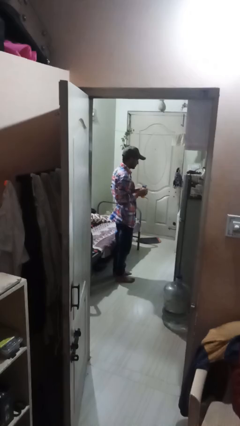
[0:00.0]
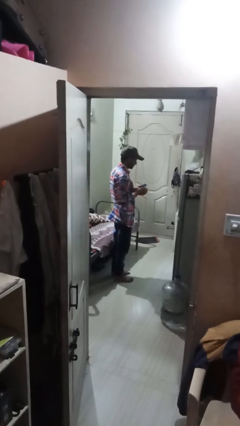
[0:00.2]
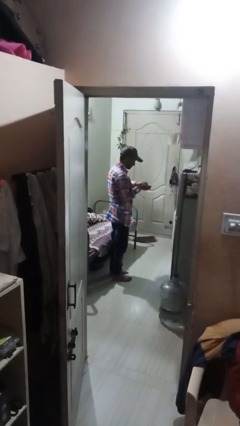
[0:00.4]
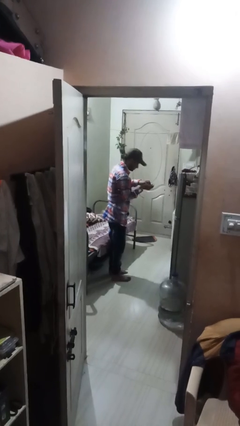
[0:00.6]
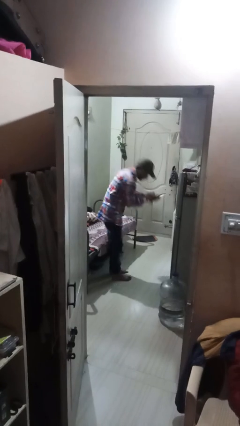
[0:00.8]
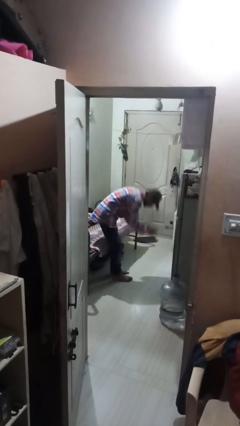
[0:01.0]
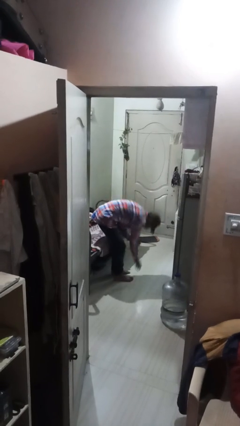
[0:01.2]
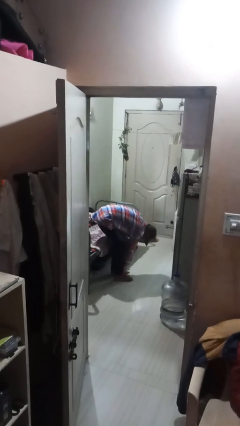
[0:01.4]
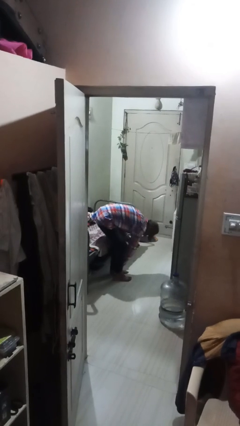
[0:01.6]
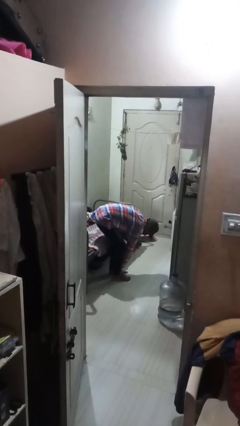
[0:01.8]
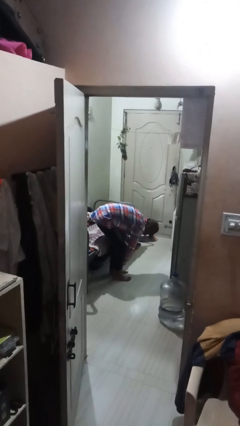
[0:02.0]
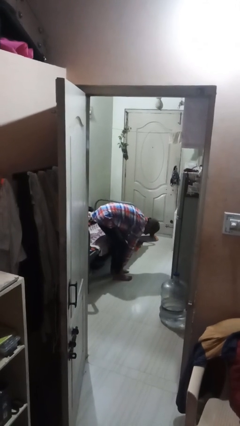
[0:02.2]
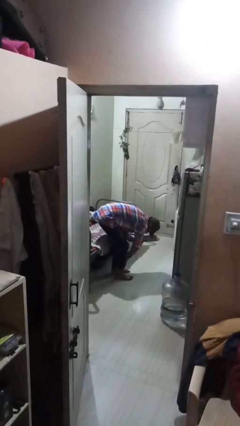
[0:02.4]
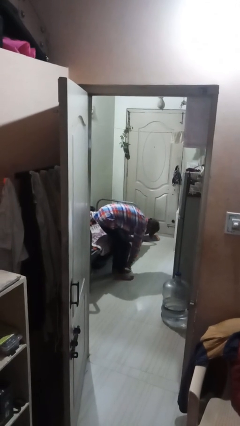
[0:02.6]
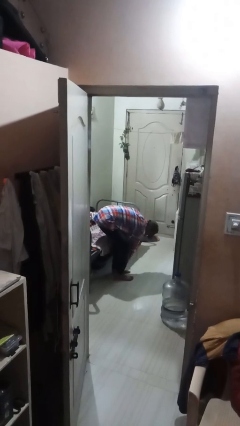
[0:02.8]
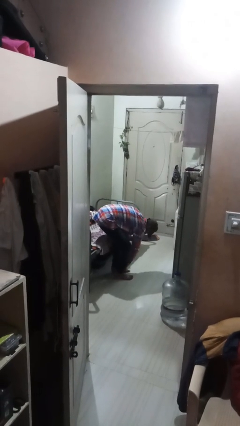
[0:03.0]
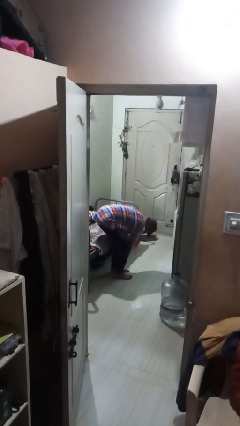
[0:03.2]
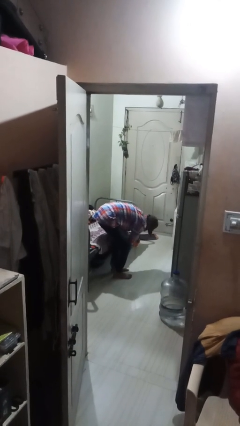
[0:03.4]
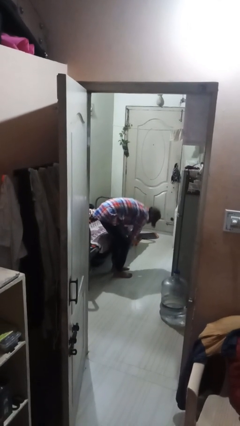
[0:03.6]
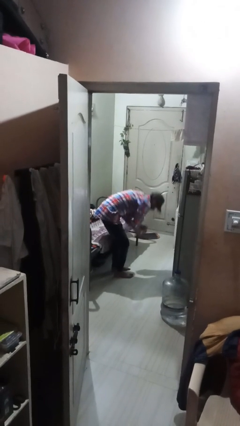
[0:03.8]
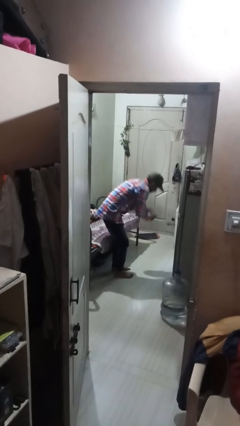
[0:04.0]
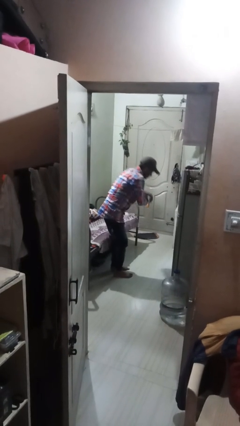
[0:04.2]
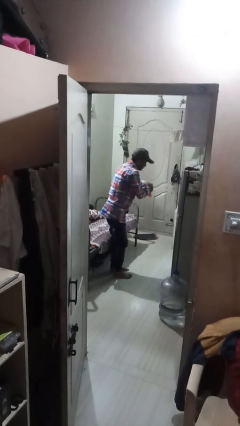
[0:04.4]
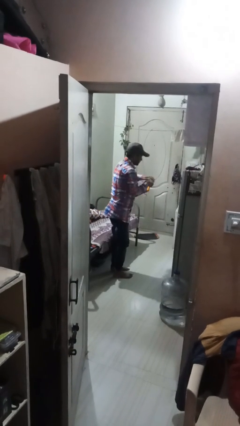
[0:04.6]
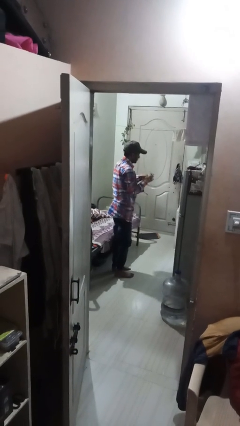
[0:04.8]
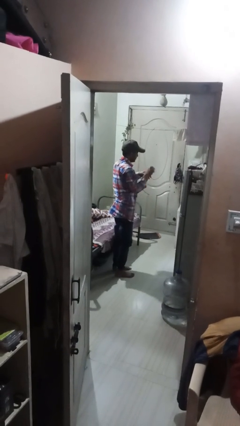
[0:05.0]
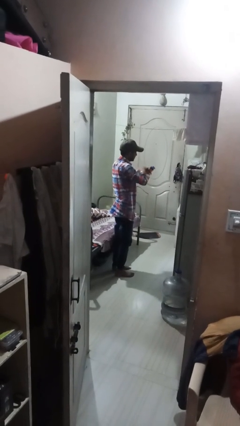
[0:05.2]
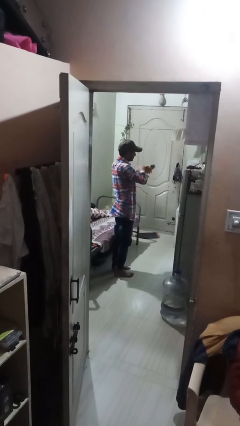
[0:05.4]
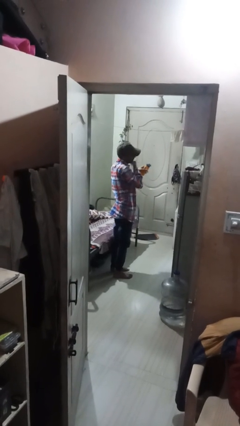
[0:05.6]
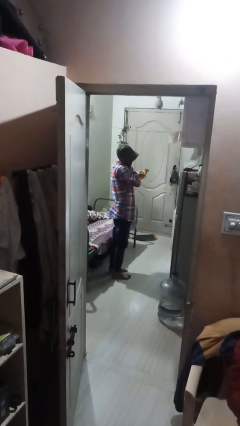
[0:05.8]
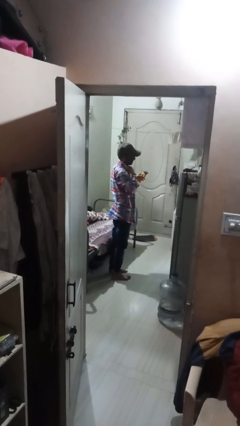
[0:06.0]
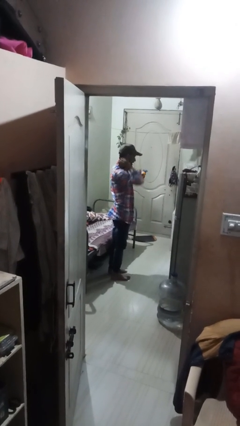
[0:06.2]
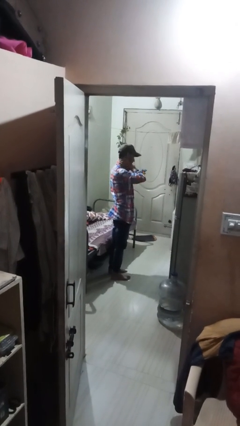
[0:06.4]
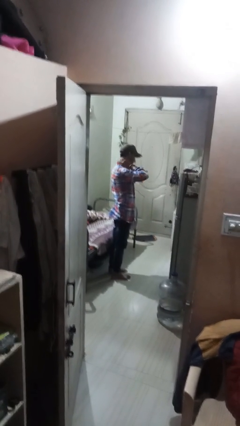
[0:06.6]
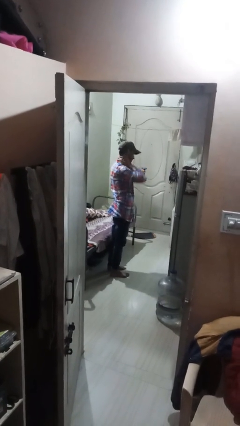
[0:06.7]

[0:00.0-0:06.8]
person applies sunscreen

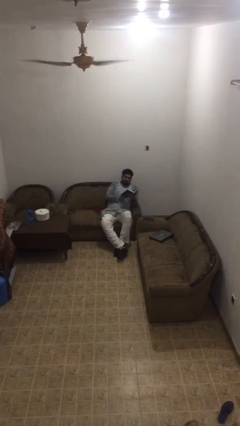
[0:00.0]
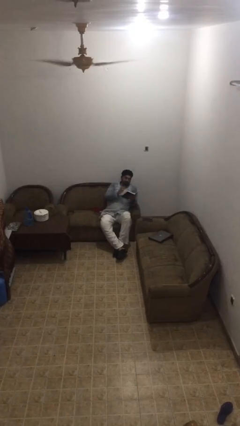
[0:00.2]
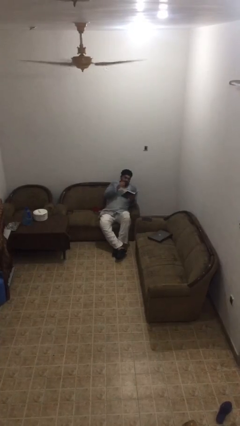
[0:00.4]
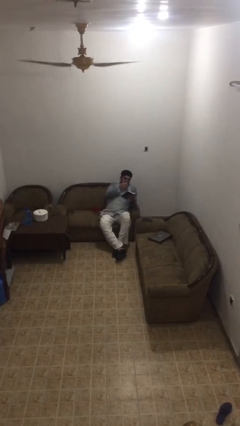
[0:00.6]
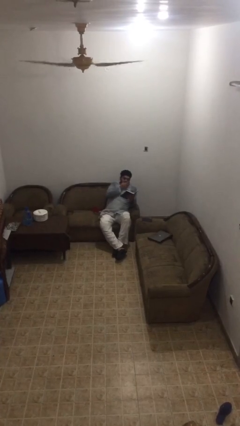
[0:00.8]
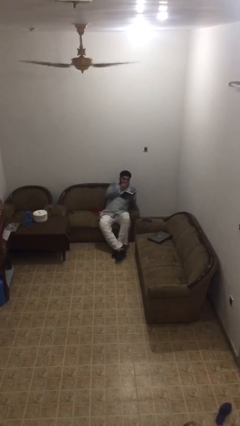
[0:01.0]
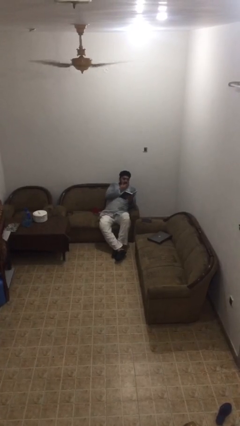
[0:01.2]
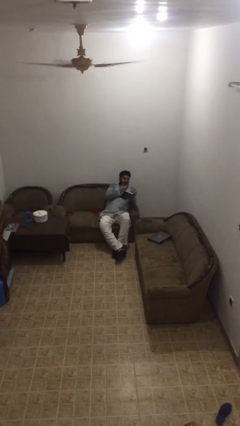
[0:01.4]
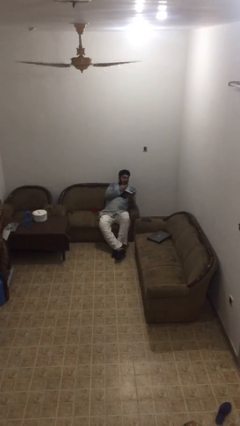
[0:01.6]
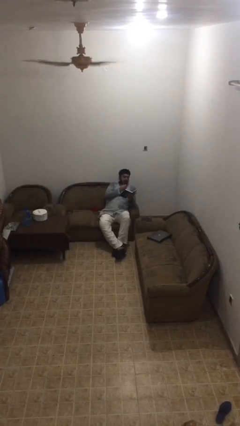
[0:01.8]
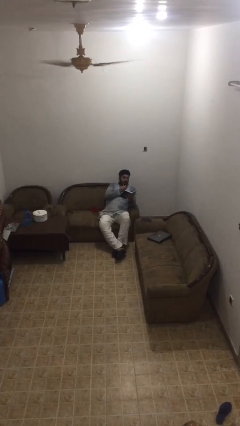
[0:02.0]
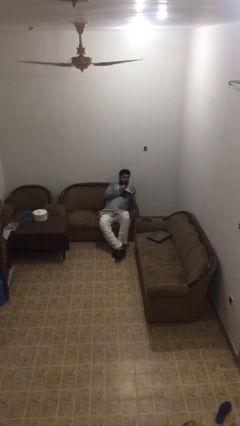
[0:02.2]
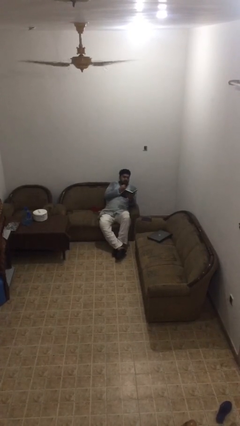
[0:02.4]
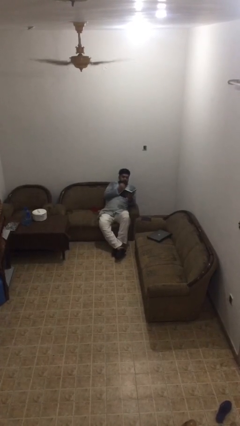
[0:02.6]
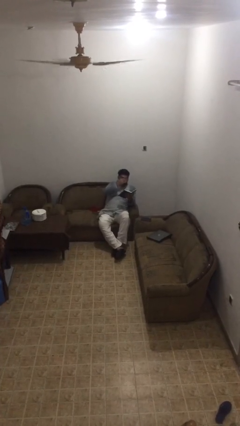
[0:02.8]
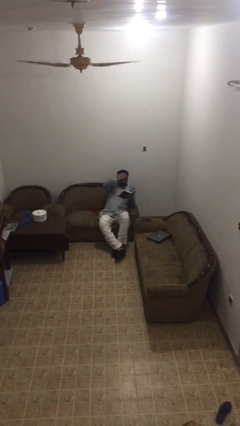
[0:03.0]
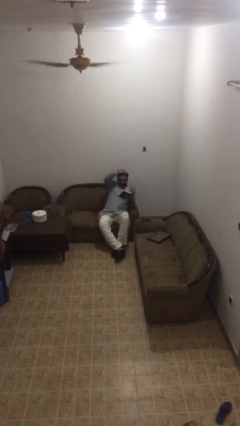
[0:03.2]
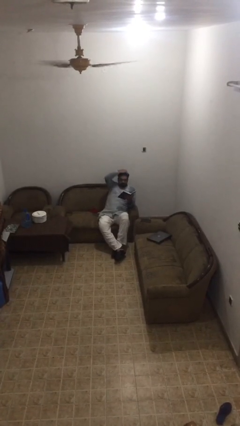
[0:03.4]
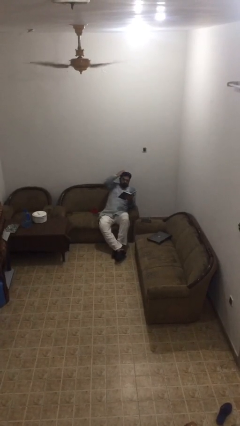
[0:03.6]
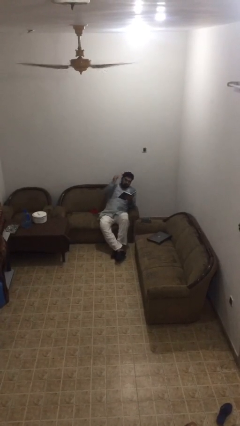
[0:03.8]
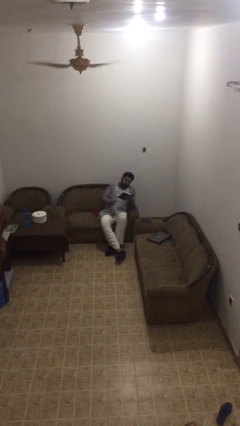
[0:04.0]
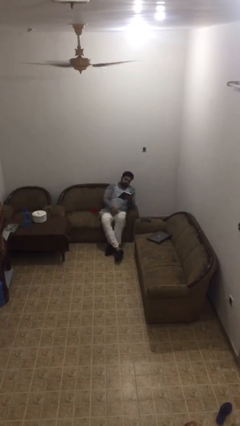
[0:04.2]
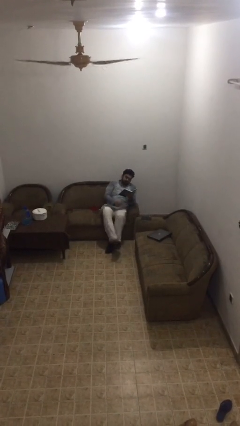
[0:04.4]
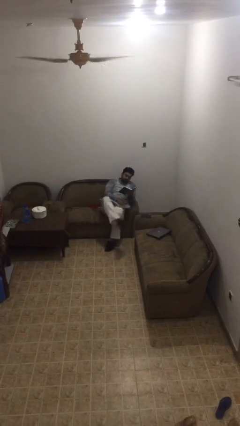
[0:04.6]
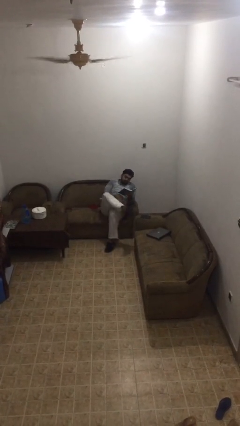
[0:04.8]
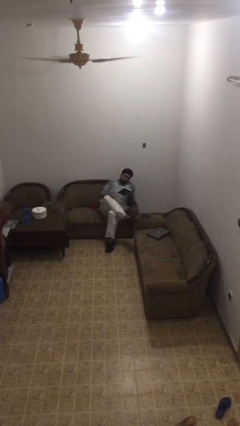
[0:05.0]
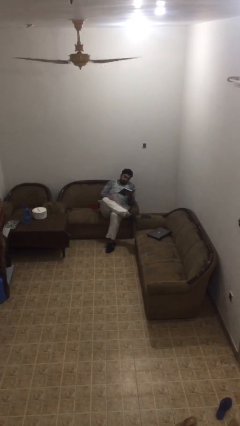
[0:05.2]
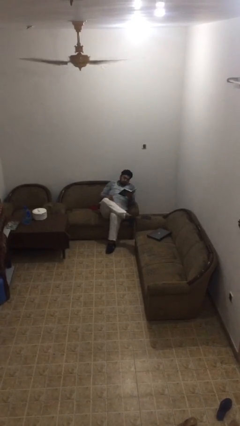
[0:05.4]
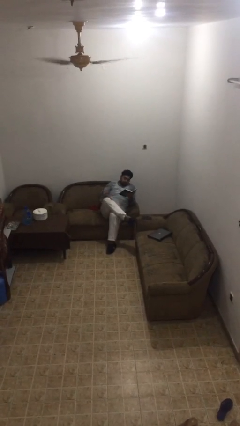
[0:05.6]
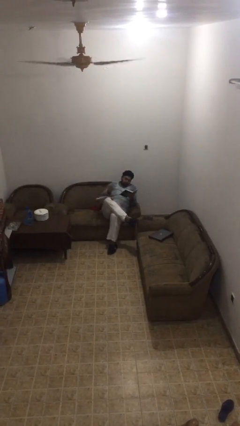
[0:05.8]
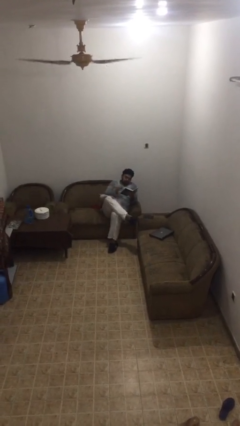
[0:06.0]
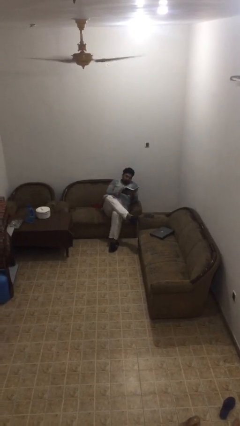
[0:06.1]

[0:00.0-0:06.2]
person reads document

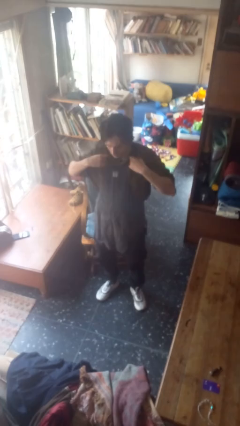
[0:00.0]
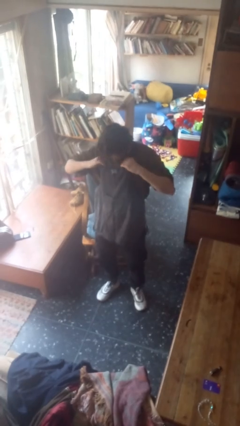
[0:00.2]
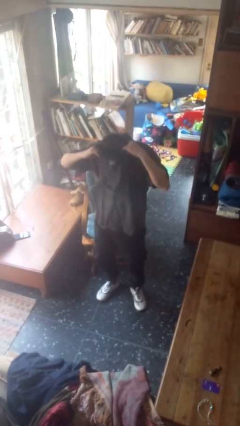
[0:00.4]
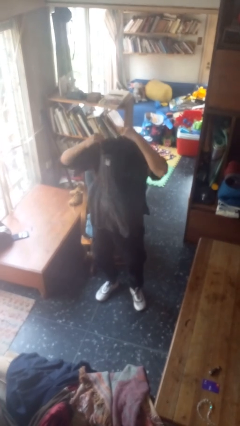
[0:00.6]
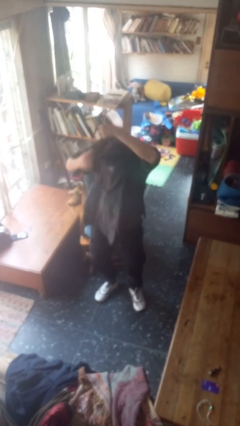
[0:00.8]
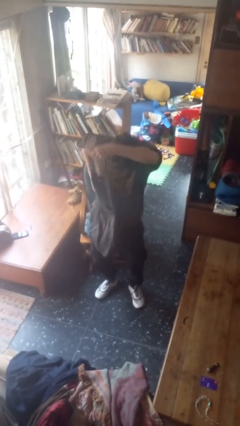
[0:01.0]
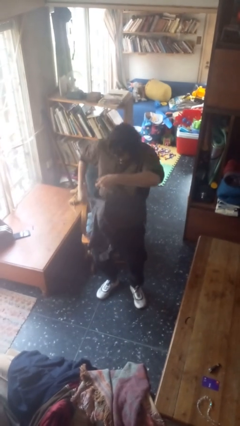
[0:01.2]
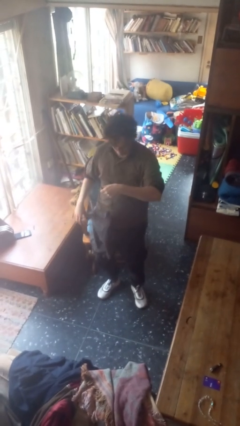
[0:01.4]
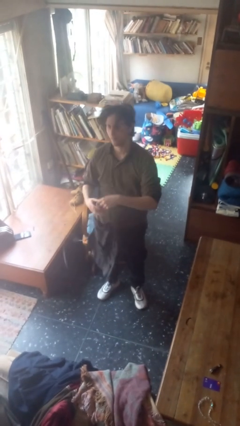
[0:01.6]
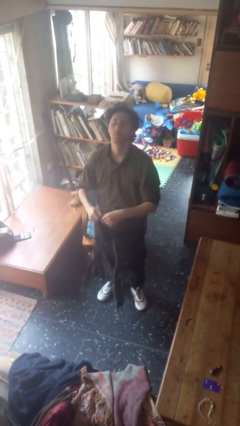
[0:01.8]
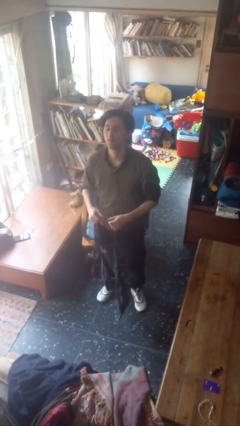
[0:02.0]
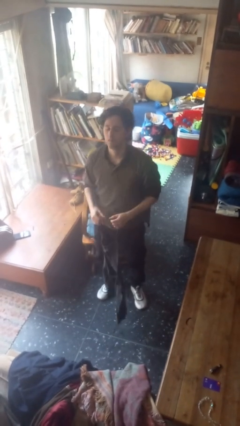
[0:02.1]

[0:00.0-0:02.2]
person takes off apron

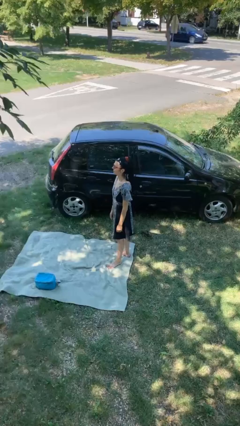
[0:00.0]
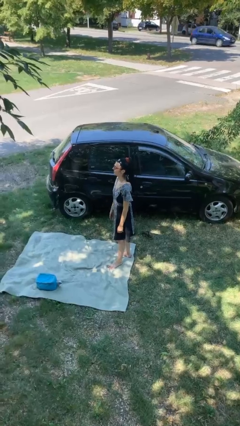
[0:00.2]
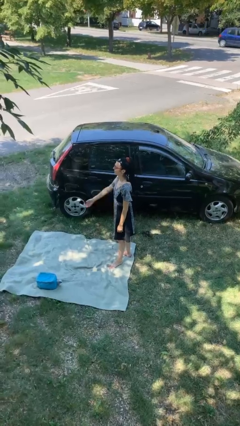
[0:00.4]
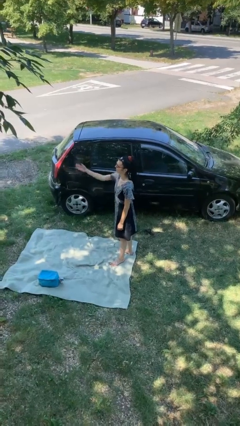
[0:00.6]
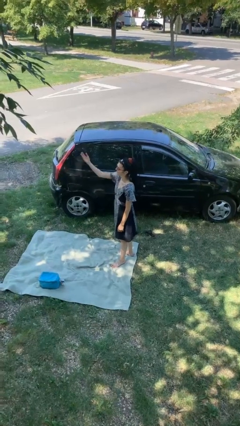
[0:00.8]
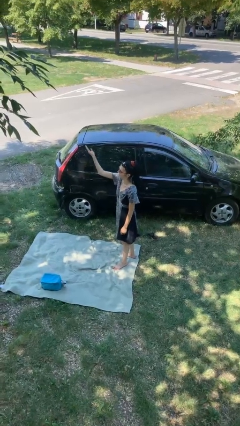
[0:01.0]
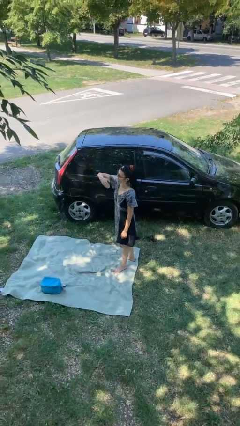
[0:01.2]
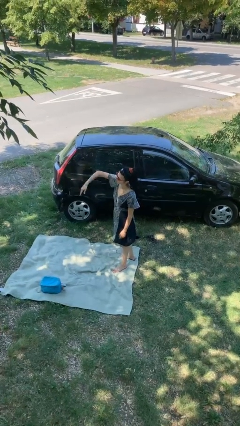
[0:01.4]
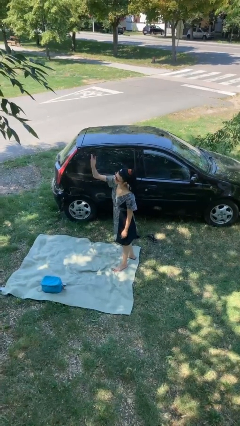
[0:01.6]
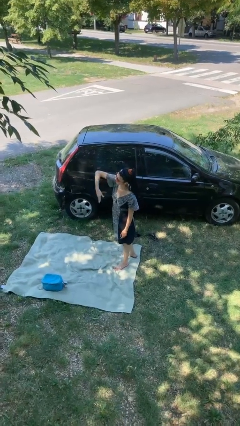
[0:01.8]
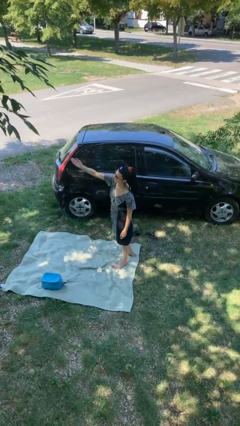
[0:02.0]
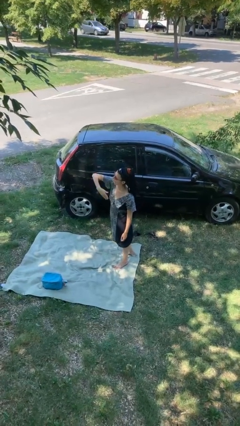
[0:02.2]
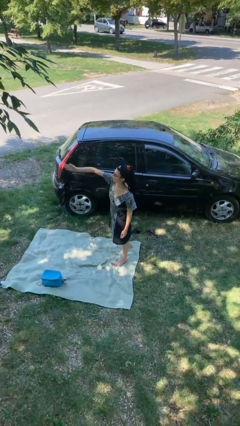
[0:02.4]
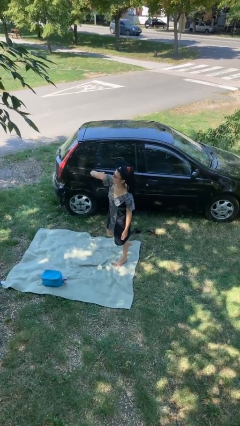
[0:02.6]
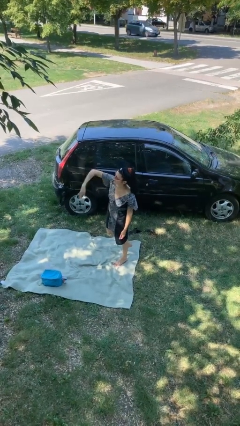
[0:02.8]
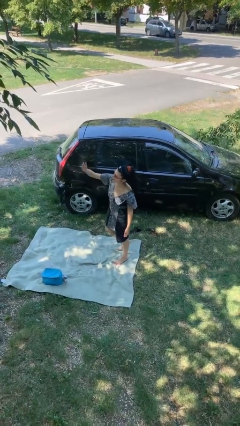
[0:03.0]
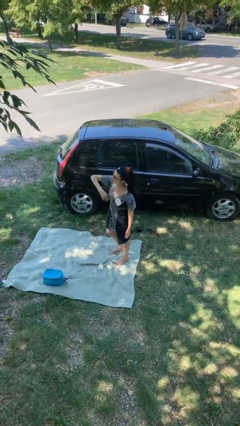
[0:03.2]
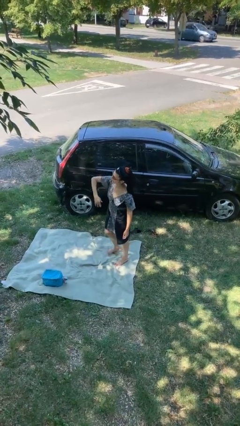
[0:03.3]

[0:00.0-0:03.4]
person gestures come here
